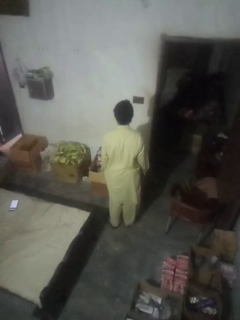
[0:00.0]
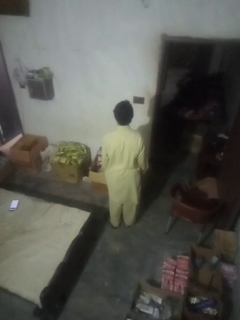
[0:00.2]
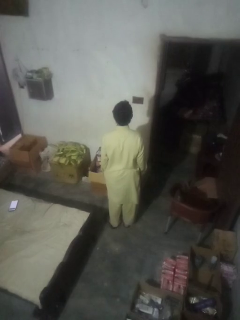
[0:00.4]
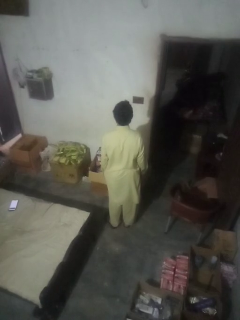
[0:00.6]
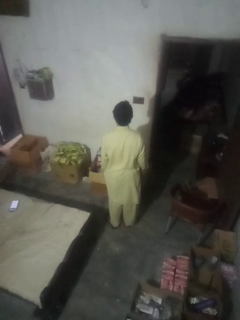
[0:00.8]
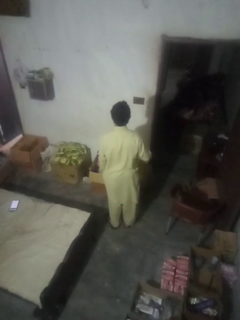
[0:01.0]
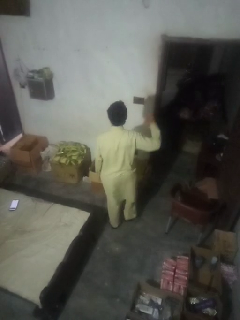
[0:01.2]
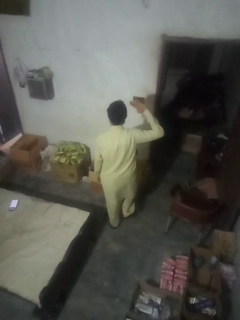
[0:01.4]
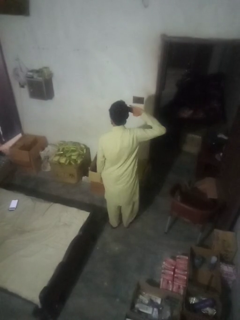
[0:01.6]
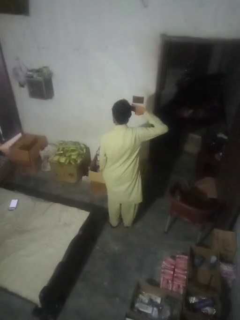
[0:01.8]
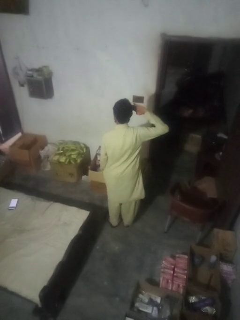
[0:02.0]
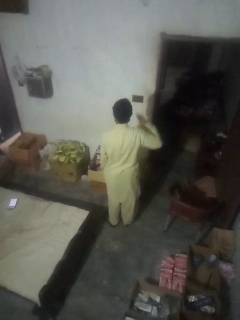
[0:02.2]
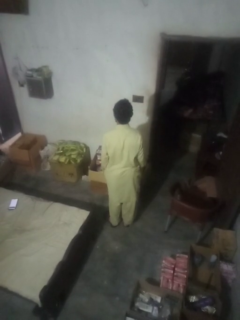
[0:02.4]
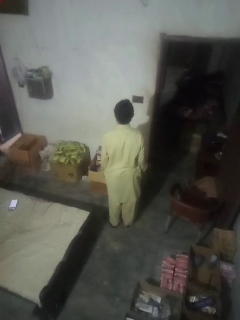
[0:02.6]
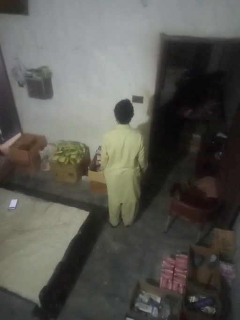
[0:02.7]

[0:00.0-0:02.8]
person salutes

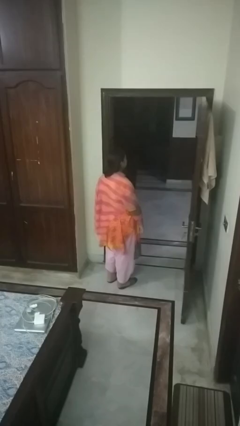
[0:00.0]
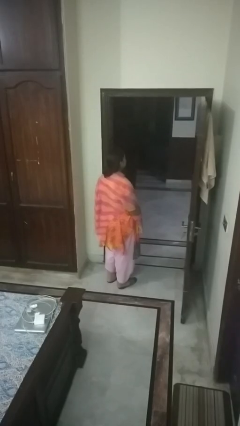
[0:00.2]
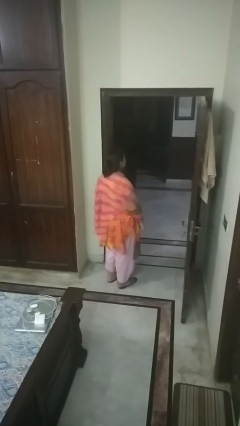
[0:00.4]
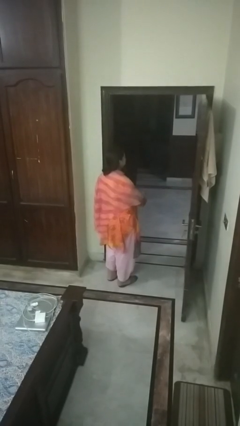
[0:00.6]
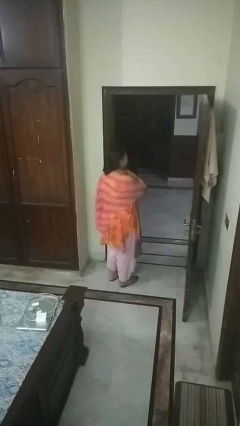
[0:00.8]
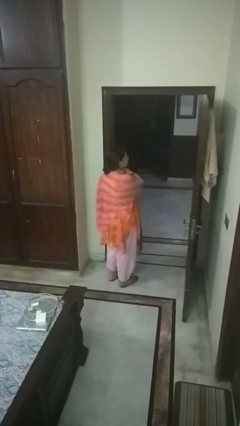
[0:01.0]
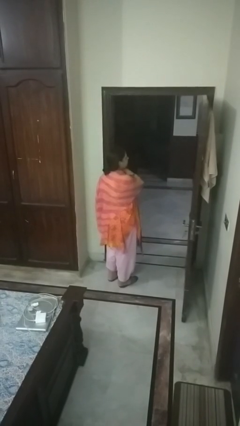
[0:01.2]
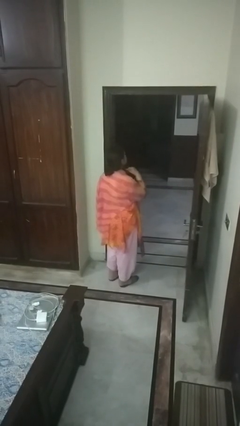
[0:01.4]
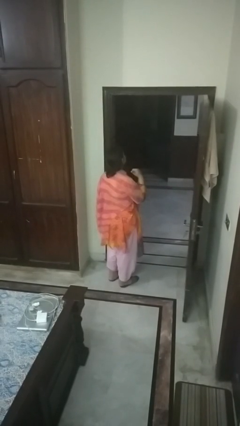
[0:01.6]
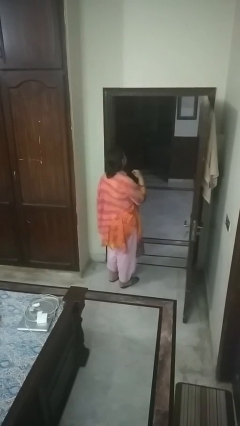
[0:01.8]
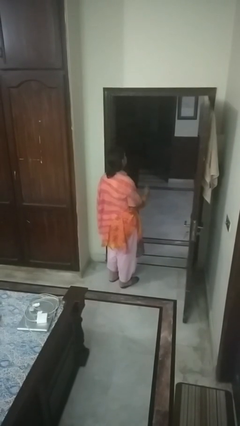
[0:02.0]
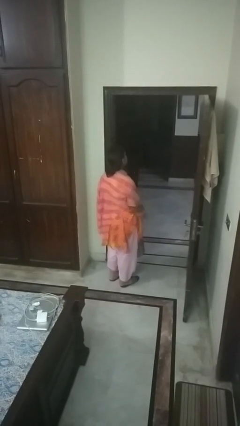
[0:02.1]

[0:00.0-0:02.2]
person gestures cut

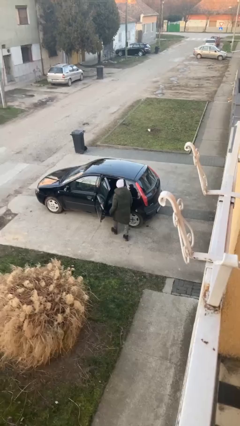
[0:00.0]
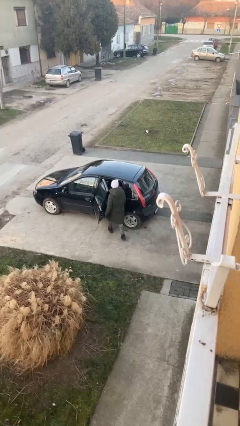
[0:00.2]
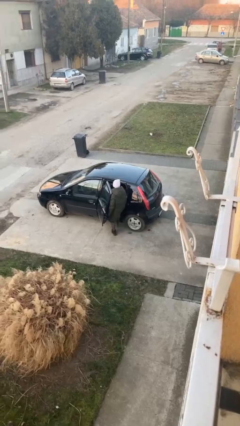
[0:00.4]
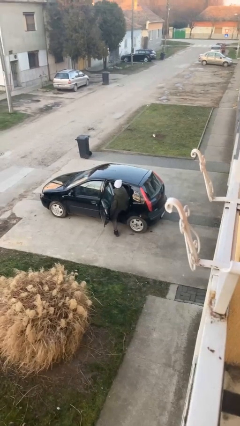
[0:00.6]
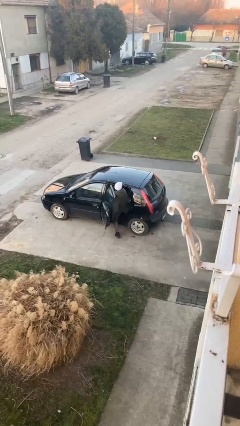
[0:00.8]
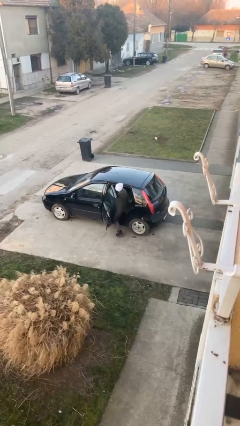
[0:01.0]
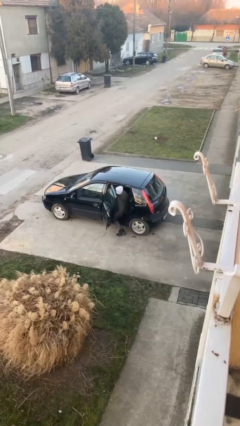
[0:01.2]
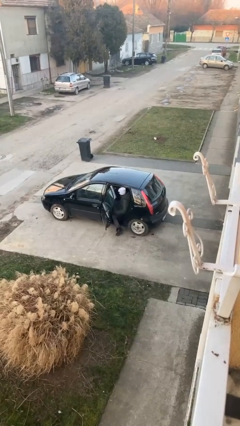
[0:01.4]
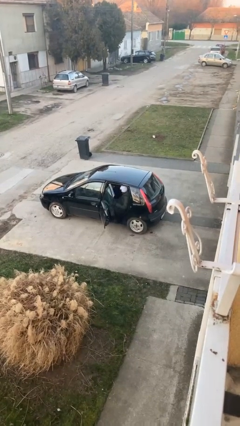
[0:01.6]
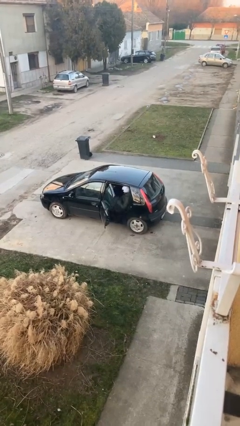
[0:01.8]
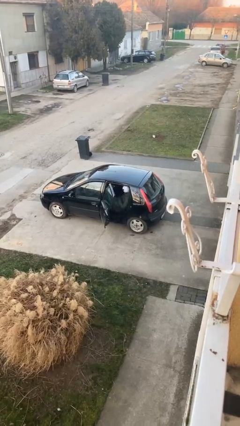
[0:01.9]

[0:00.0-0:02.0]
person enters car

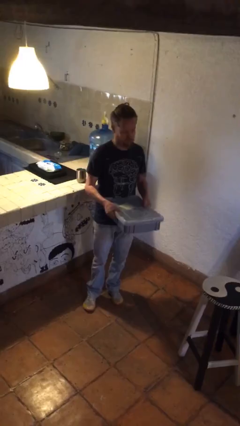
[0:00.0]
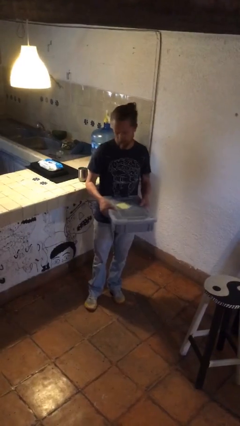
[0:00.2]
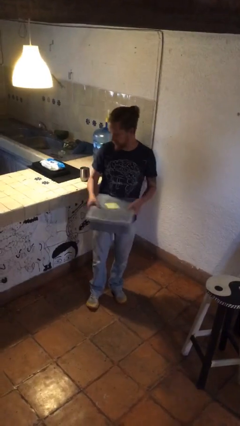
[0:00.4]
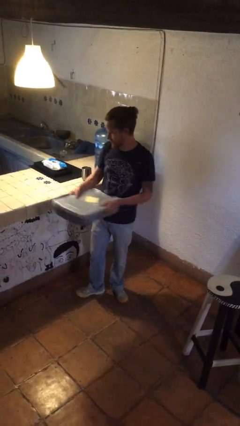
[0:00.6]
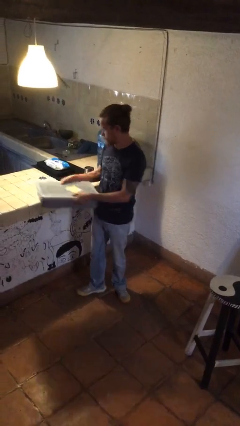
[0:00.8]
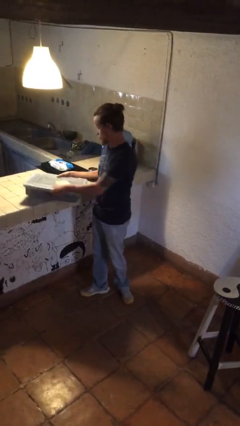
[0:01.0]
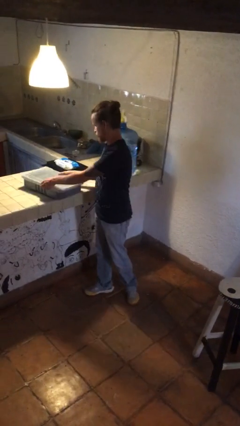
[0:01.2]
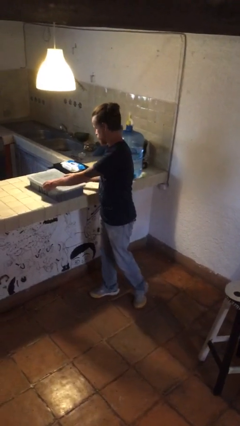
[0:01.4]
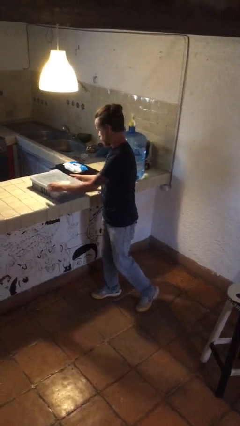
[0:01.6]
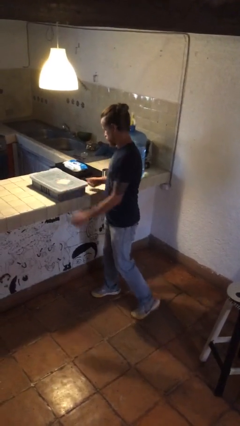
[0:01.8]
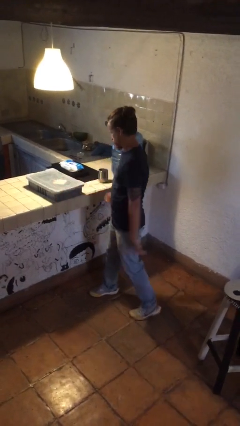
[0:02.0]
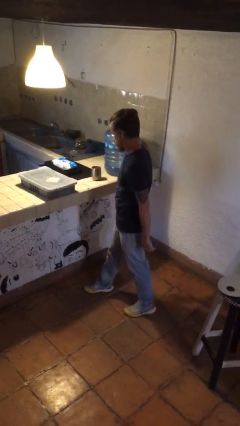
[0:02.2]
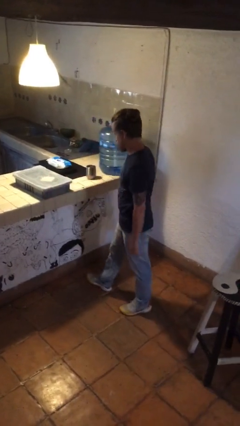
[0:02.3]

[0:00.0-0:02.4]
person puts down object on countertop

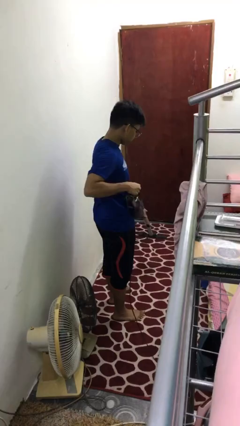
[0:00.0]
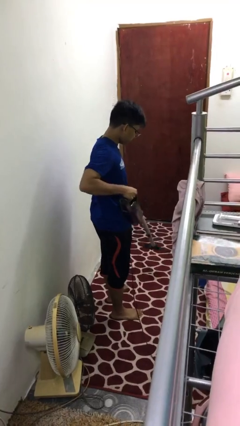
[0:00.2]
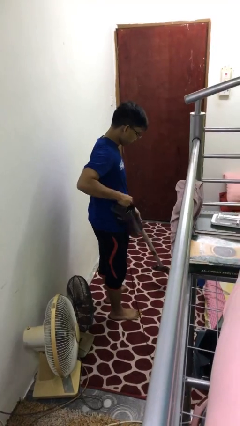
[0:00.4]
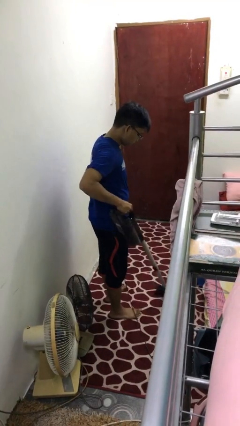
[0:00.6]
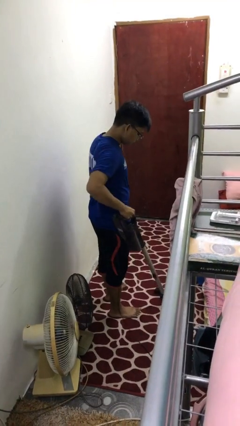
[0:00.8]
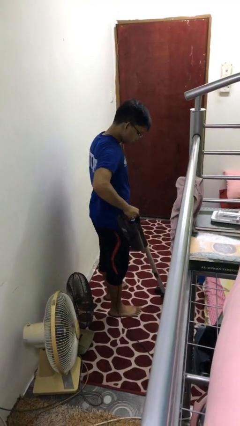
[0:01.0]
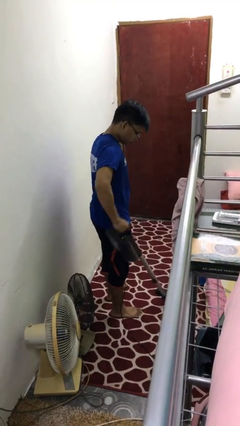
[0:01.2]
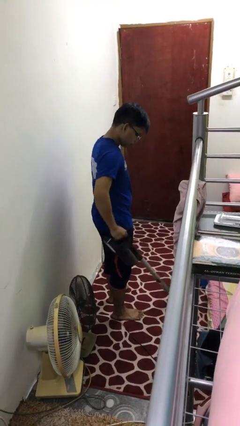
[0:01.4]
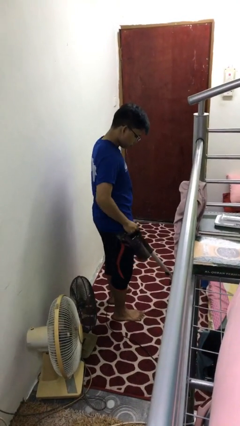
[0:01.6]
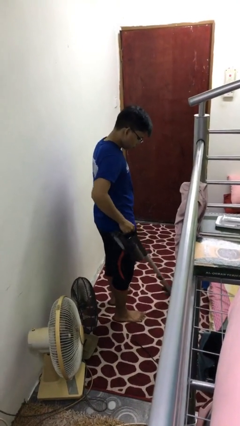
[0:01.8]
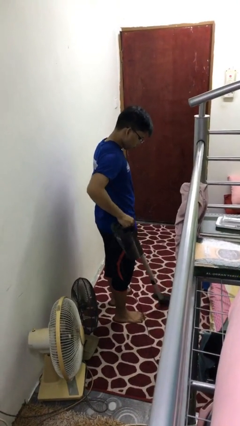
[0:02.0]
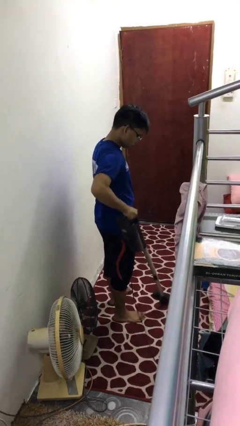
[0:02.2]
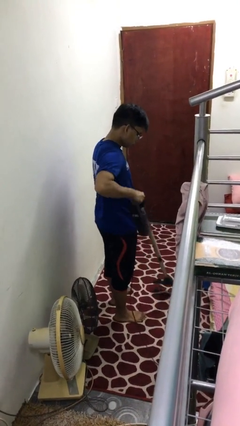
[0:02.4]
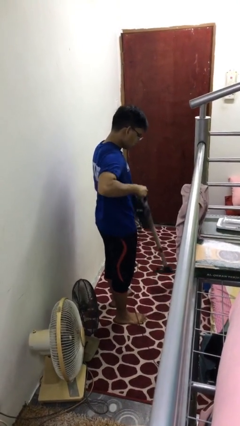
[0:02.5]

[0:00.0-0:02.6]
person vacuums carpet

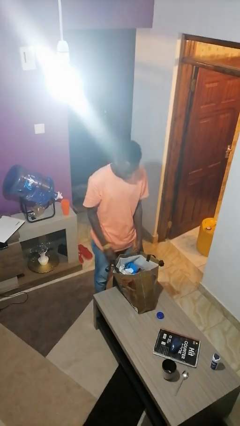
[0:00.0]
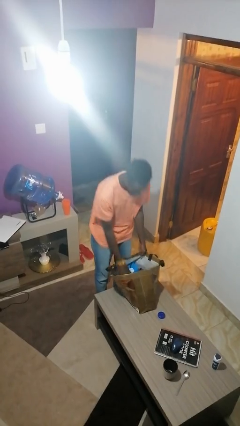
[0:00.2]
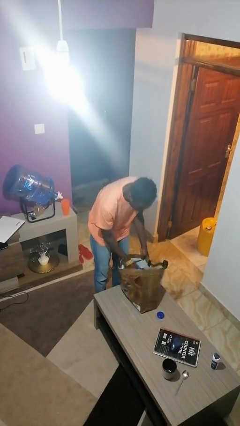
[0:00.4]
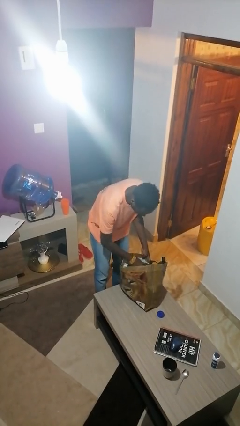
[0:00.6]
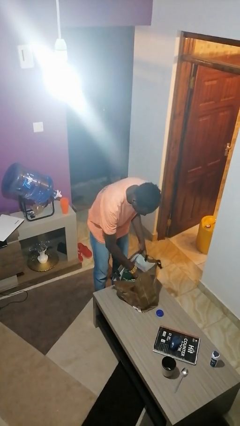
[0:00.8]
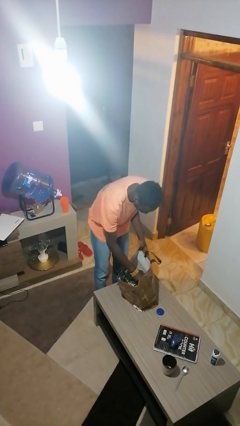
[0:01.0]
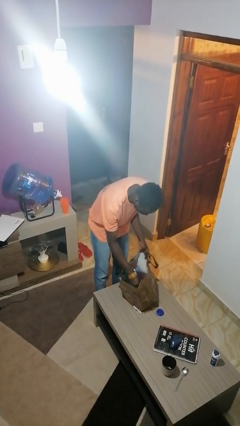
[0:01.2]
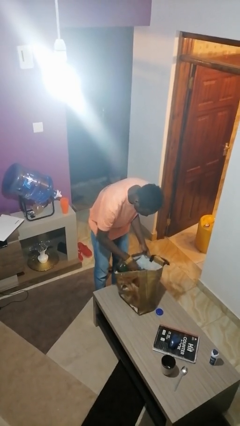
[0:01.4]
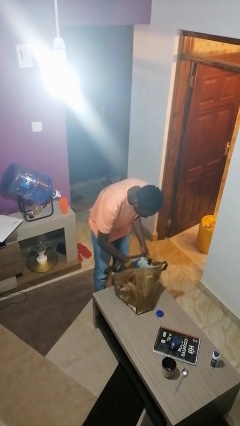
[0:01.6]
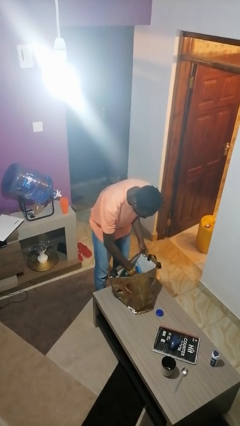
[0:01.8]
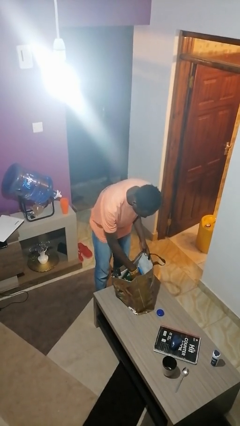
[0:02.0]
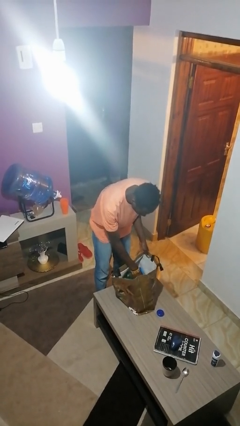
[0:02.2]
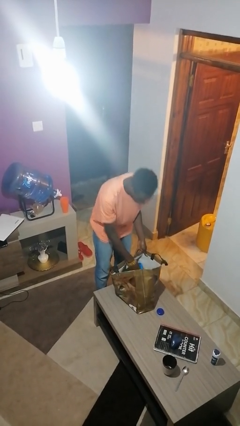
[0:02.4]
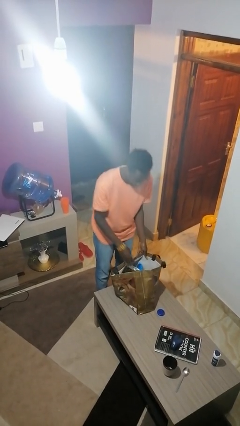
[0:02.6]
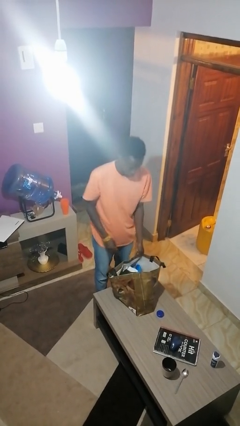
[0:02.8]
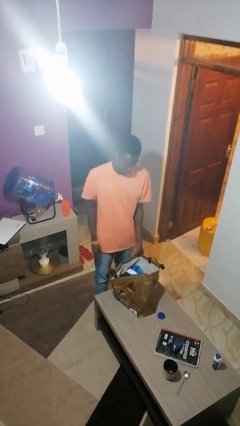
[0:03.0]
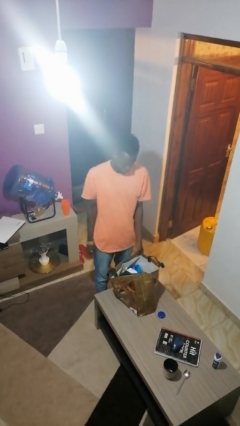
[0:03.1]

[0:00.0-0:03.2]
person searches in bag

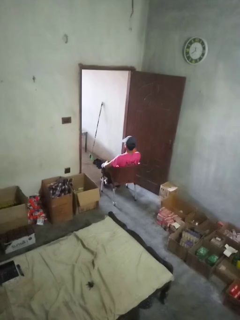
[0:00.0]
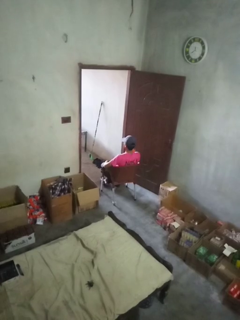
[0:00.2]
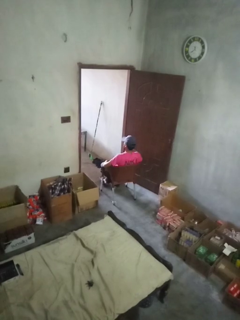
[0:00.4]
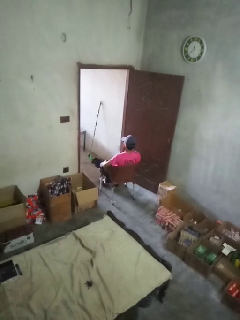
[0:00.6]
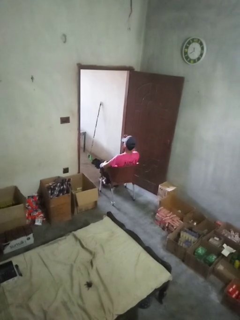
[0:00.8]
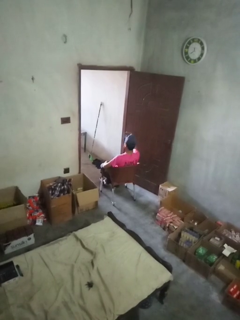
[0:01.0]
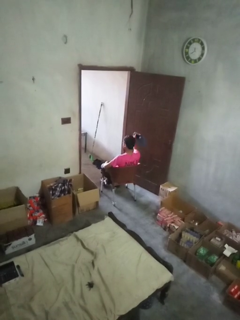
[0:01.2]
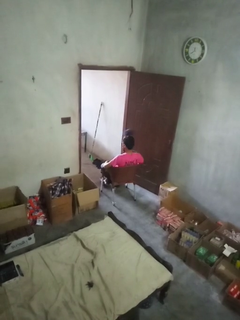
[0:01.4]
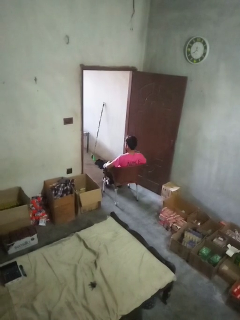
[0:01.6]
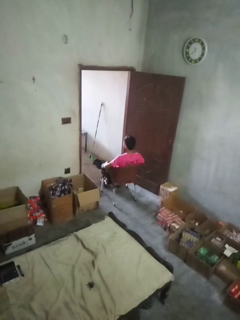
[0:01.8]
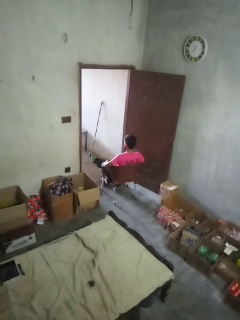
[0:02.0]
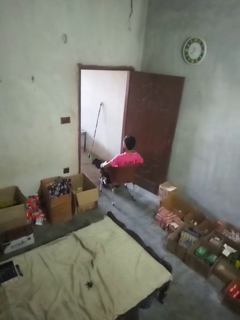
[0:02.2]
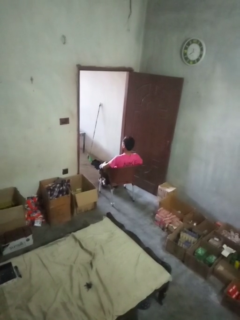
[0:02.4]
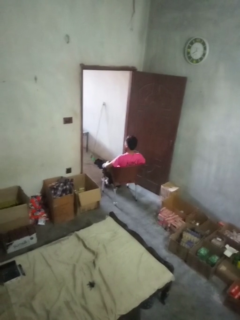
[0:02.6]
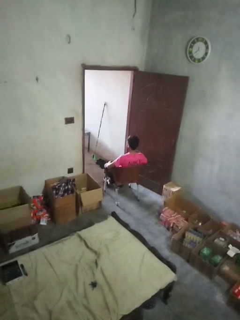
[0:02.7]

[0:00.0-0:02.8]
person takes off hat
